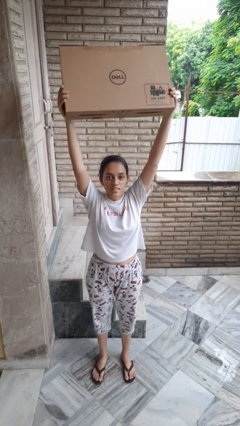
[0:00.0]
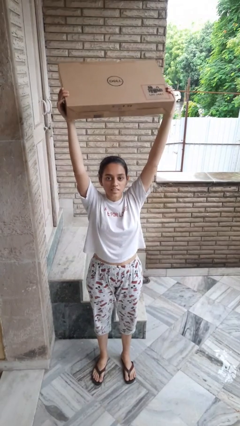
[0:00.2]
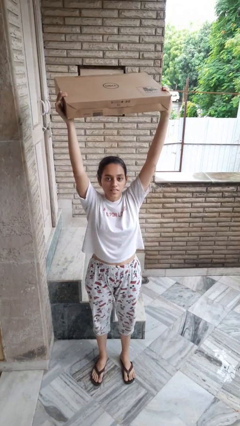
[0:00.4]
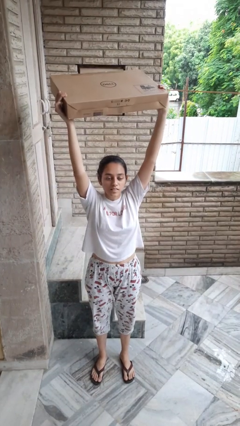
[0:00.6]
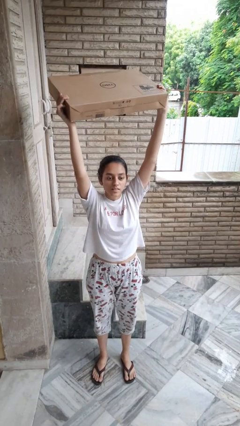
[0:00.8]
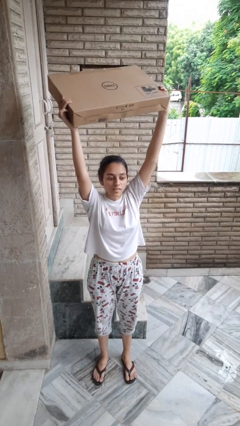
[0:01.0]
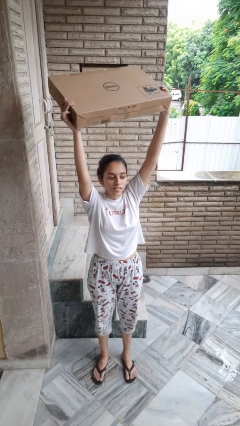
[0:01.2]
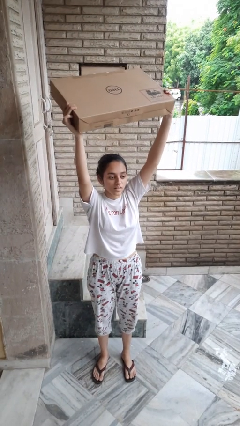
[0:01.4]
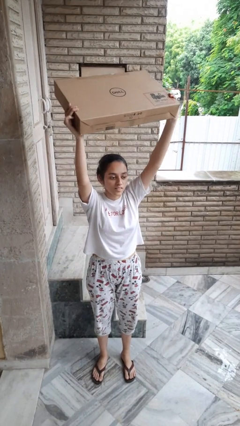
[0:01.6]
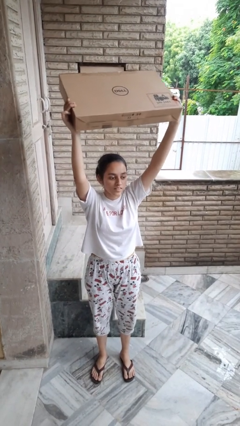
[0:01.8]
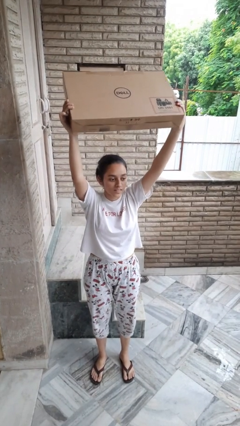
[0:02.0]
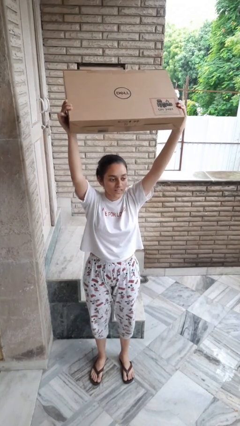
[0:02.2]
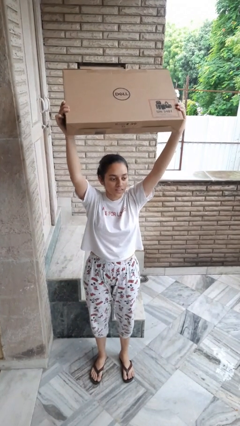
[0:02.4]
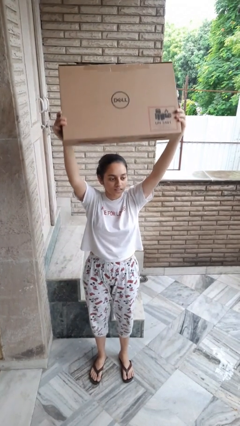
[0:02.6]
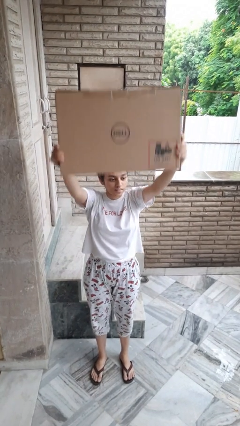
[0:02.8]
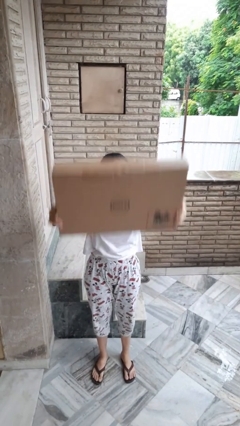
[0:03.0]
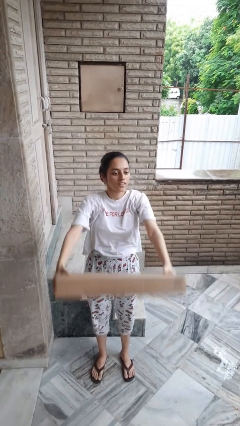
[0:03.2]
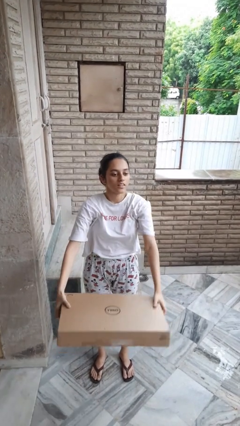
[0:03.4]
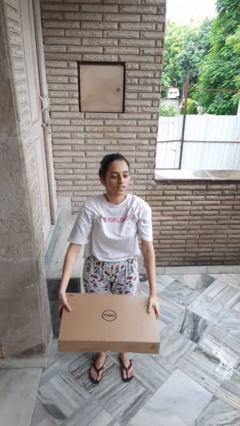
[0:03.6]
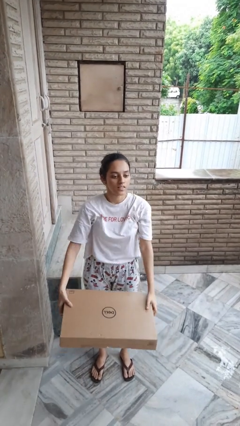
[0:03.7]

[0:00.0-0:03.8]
person holds object above head

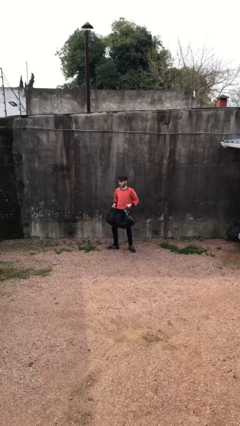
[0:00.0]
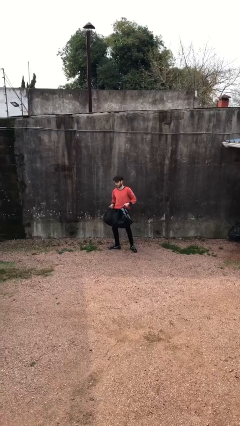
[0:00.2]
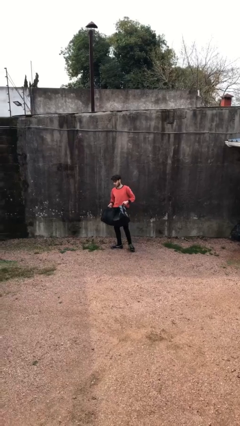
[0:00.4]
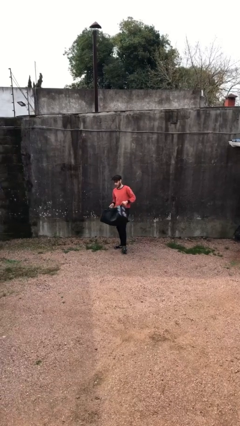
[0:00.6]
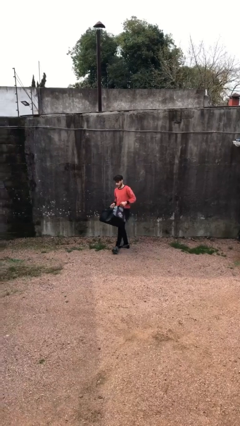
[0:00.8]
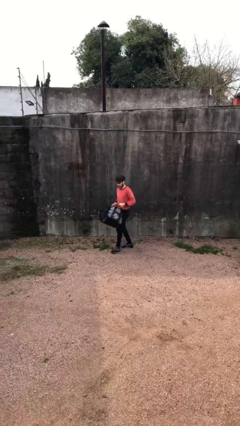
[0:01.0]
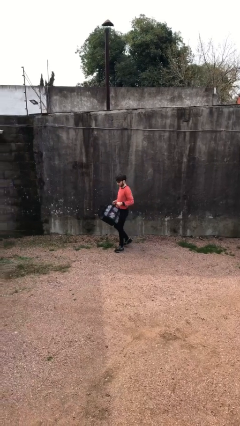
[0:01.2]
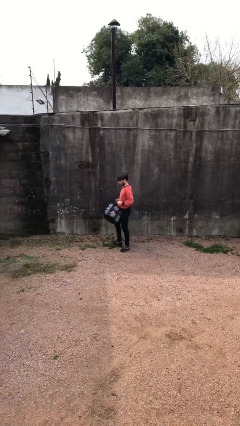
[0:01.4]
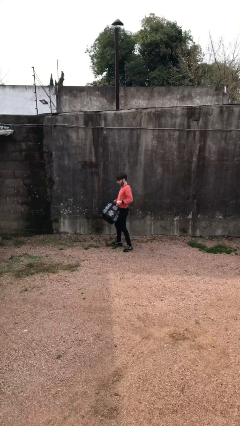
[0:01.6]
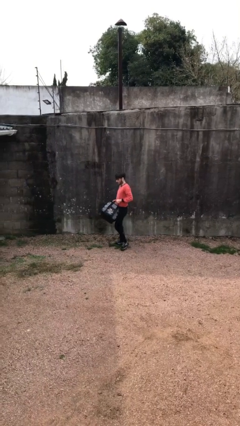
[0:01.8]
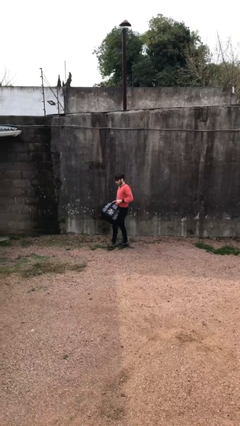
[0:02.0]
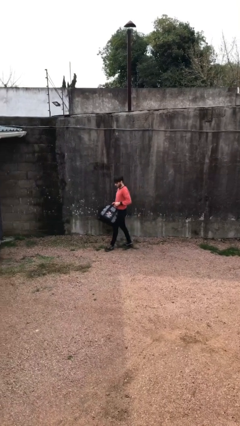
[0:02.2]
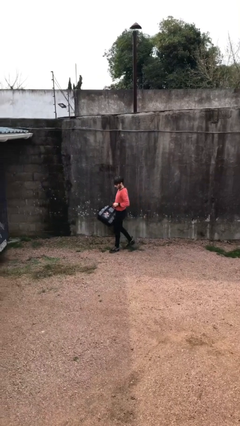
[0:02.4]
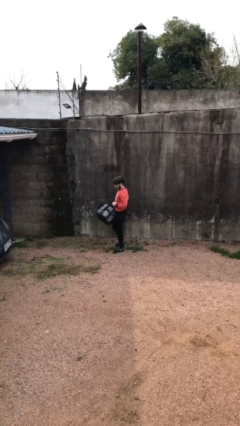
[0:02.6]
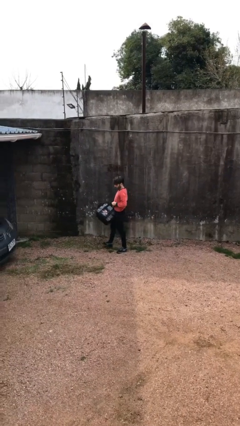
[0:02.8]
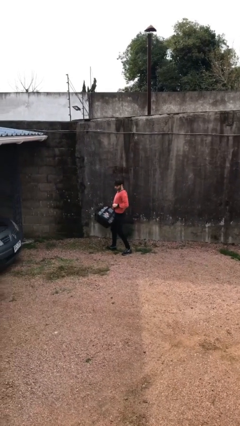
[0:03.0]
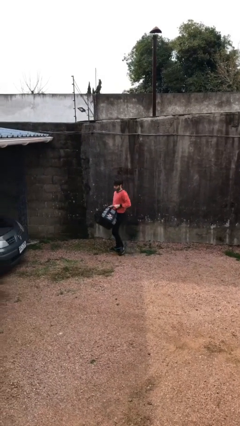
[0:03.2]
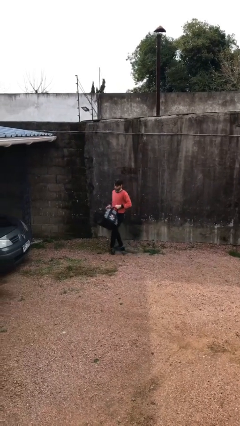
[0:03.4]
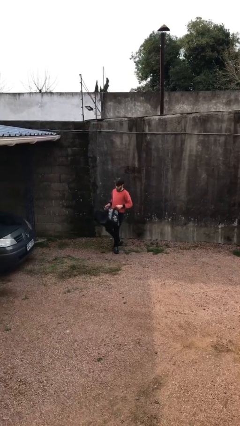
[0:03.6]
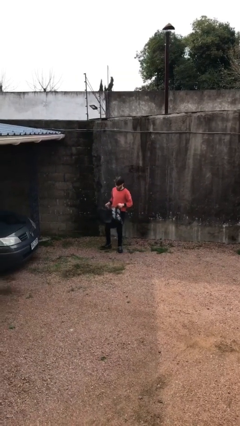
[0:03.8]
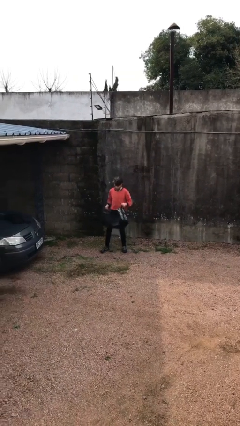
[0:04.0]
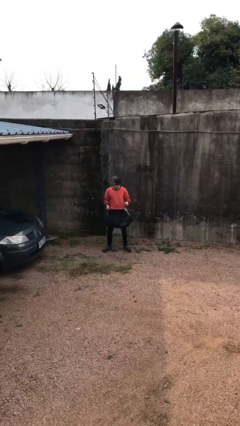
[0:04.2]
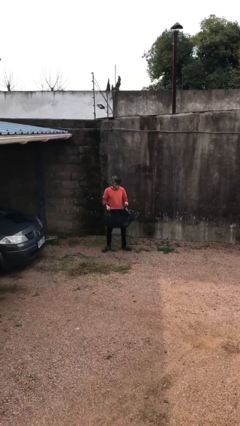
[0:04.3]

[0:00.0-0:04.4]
person carries heavy object

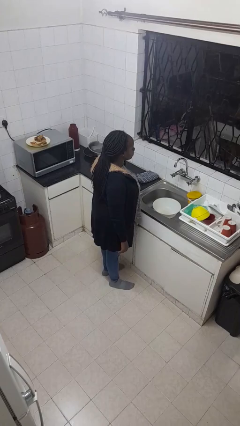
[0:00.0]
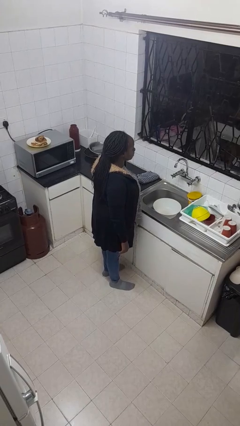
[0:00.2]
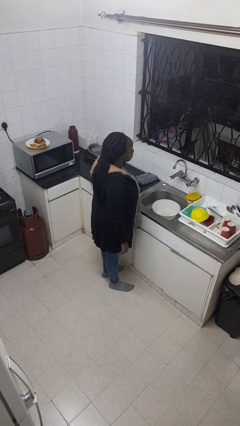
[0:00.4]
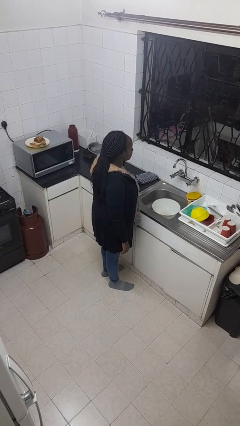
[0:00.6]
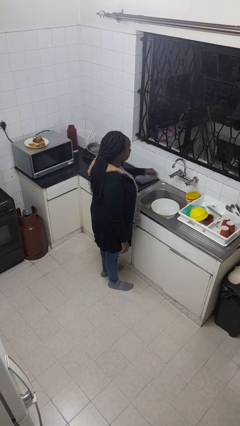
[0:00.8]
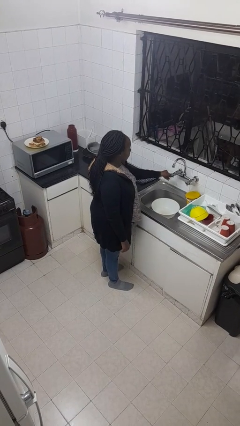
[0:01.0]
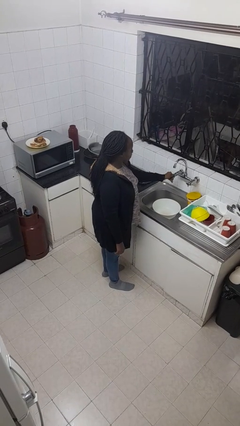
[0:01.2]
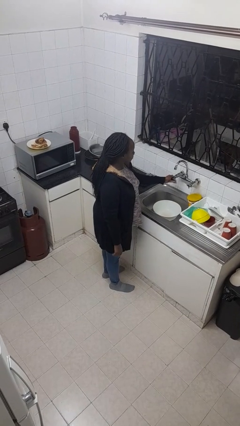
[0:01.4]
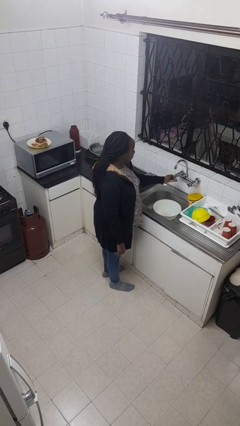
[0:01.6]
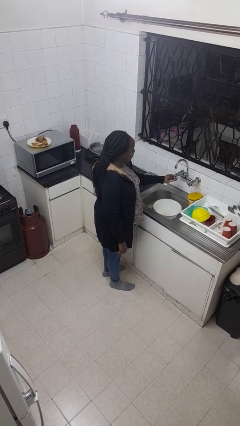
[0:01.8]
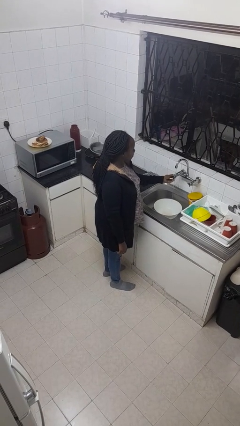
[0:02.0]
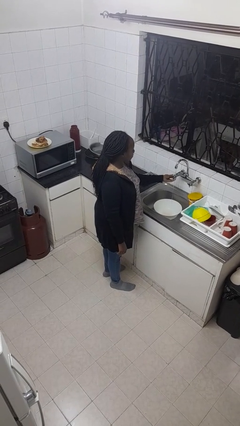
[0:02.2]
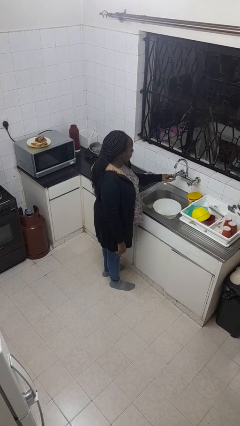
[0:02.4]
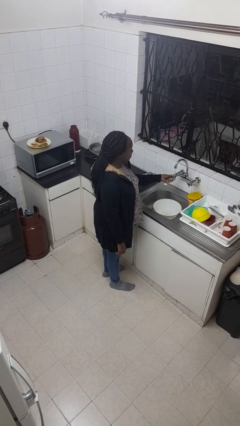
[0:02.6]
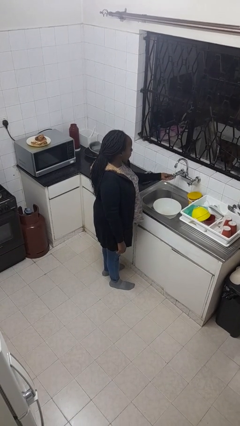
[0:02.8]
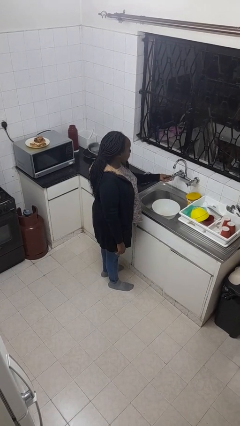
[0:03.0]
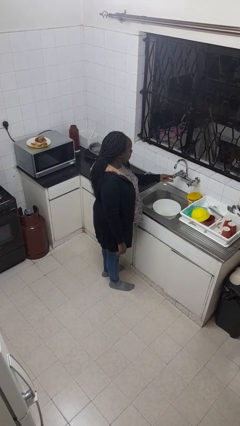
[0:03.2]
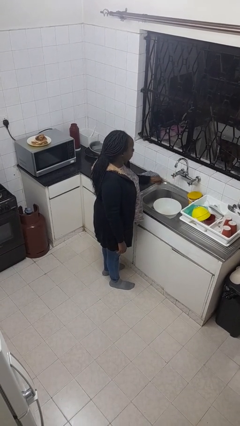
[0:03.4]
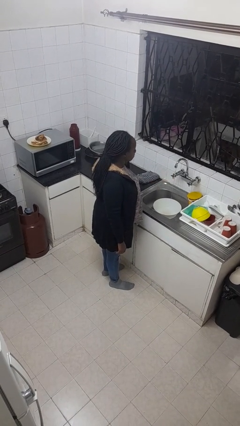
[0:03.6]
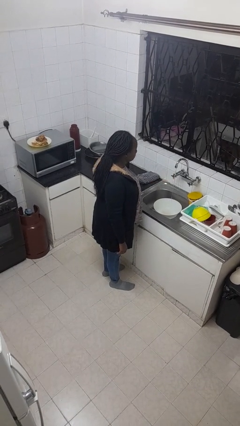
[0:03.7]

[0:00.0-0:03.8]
person turns on faucet

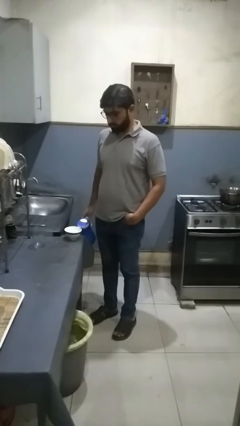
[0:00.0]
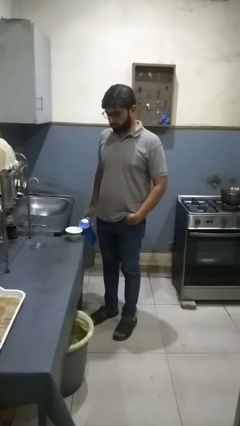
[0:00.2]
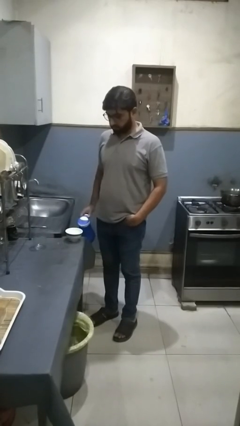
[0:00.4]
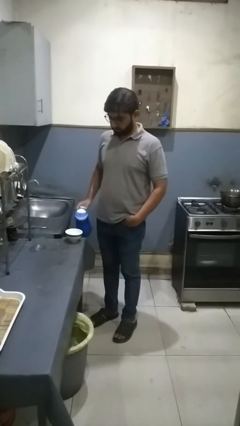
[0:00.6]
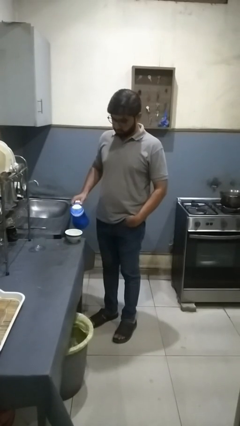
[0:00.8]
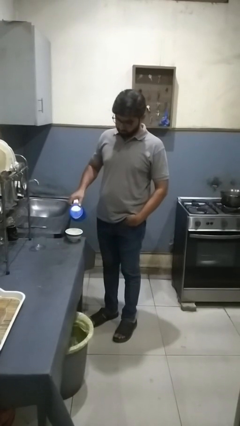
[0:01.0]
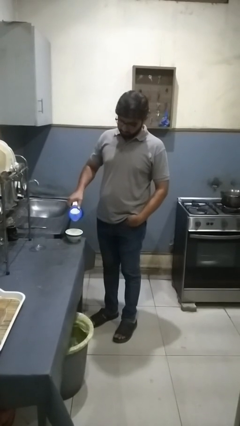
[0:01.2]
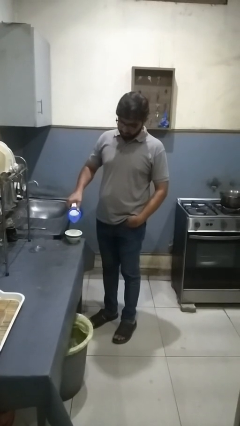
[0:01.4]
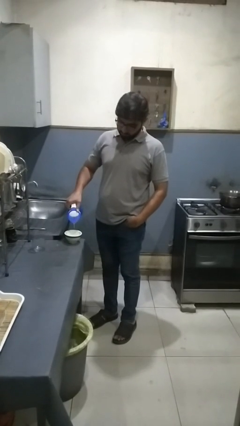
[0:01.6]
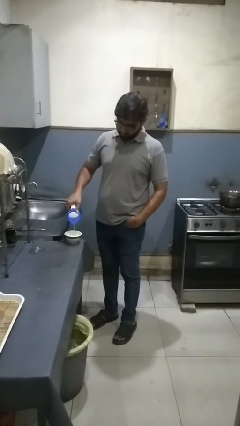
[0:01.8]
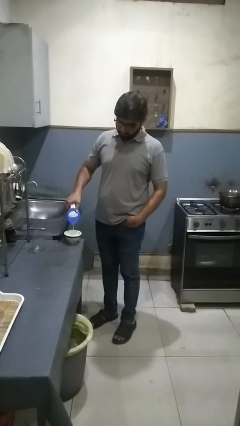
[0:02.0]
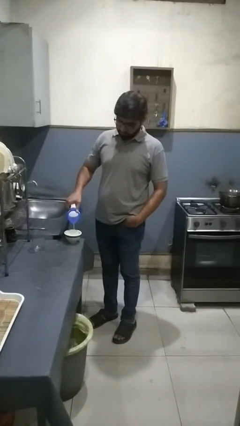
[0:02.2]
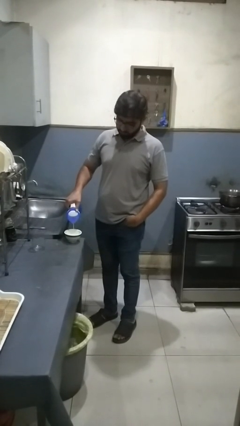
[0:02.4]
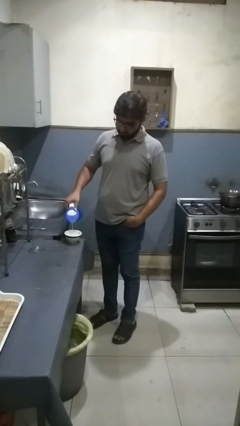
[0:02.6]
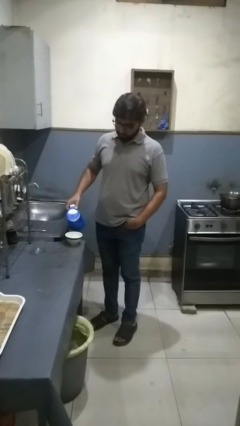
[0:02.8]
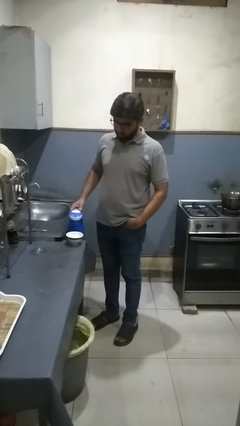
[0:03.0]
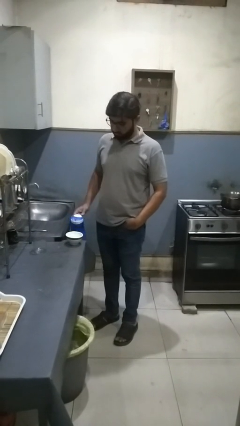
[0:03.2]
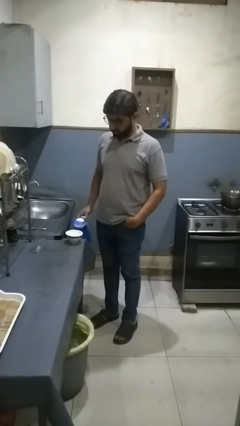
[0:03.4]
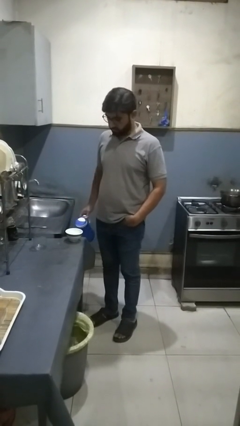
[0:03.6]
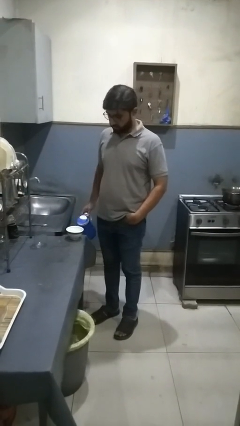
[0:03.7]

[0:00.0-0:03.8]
person pours into bowl

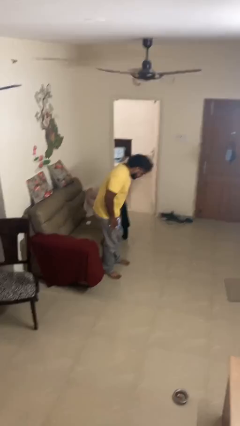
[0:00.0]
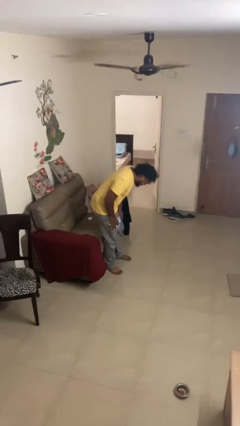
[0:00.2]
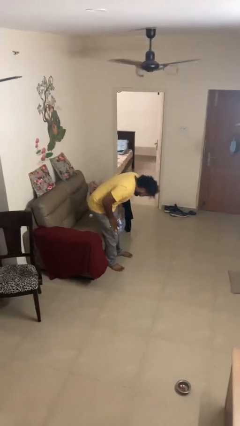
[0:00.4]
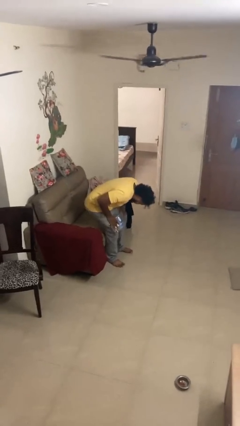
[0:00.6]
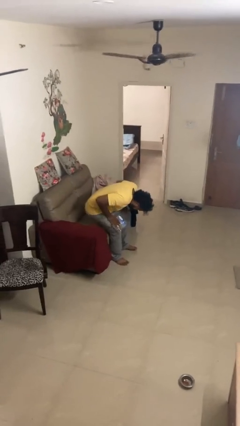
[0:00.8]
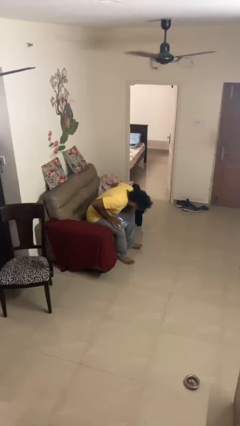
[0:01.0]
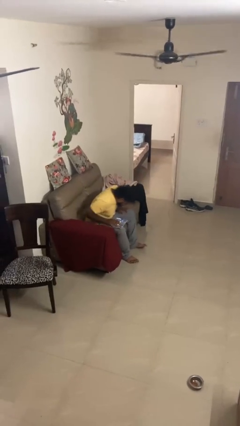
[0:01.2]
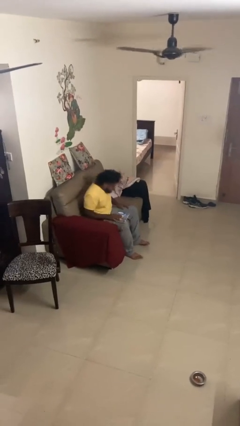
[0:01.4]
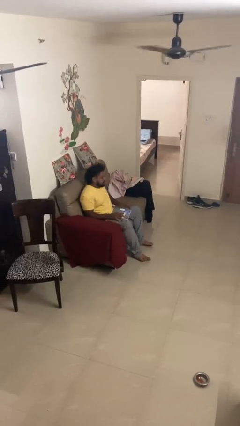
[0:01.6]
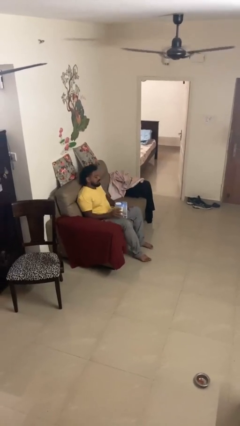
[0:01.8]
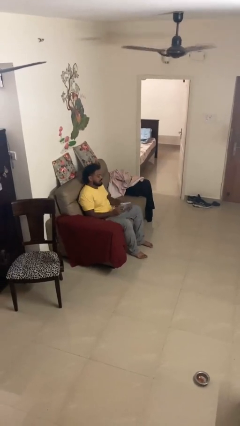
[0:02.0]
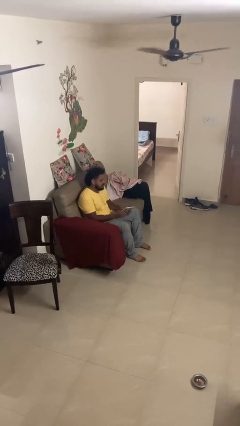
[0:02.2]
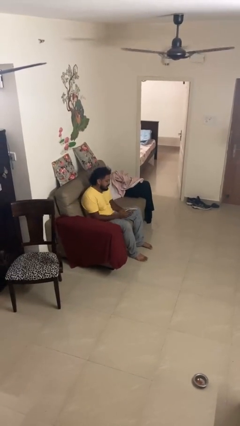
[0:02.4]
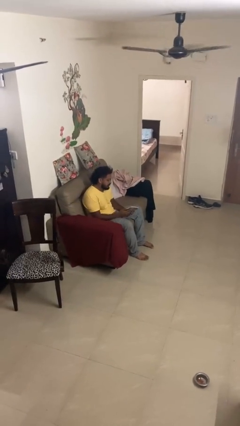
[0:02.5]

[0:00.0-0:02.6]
person sits down
